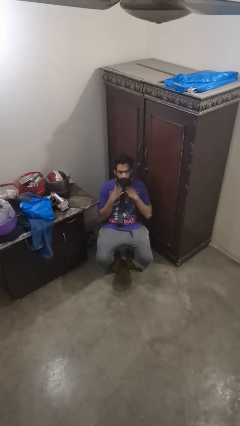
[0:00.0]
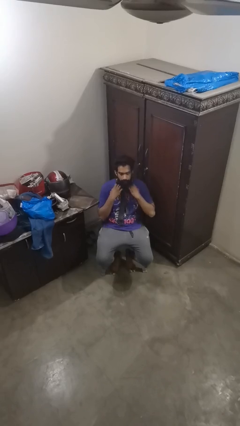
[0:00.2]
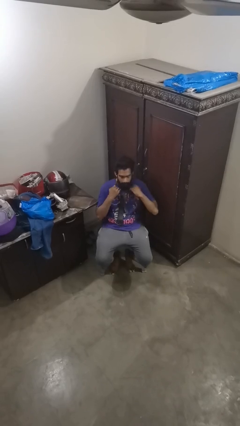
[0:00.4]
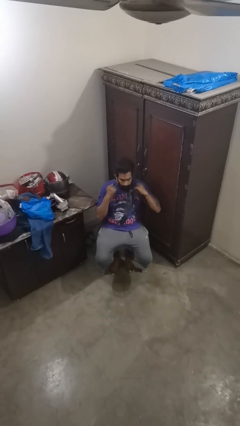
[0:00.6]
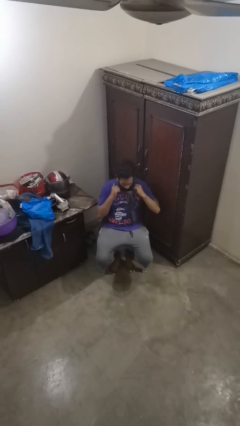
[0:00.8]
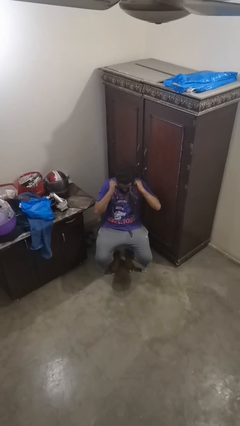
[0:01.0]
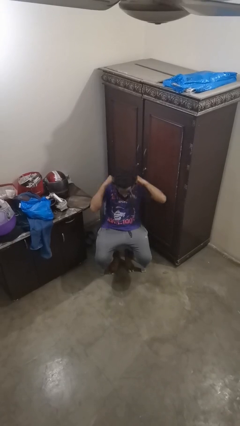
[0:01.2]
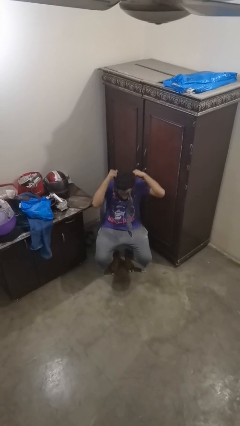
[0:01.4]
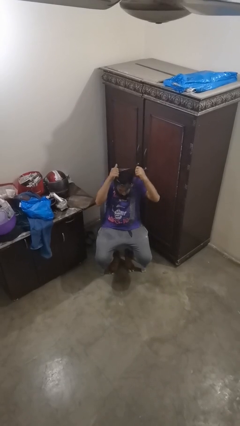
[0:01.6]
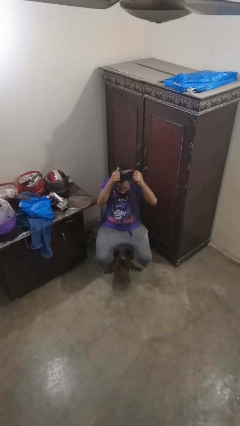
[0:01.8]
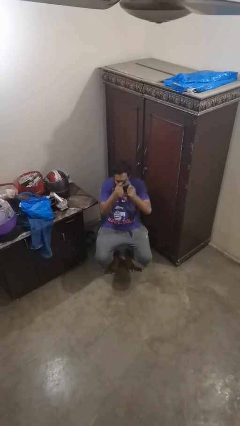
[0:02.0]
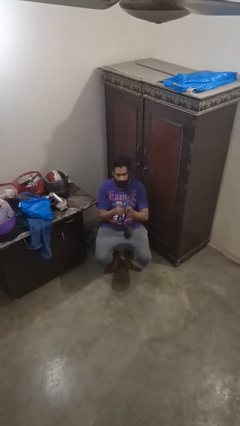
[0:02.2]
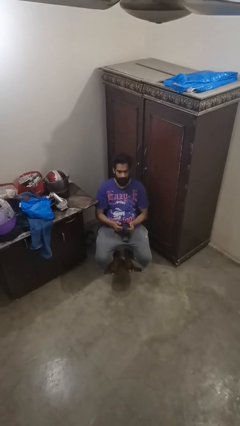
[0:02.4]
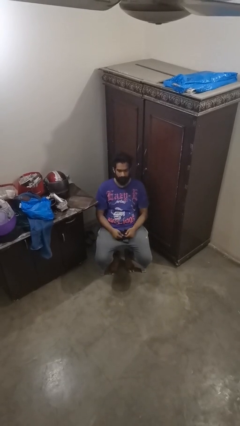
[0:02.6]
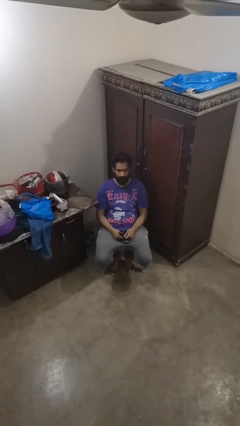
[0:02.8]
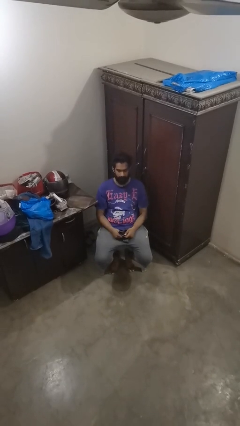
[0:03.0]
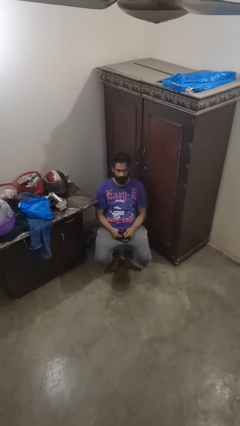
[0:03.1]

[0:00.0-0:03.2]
person takes off necktie

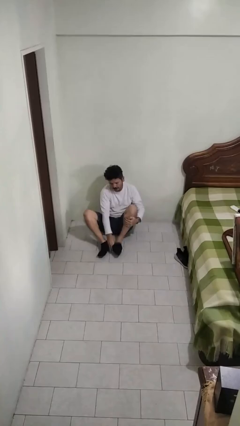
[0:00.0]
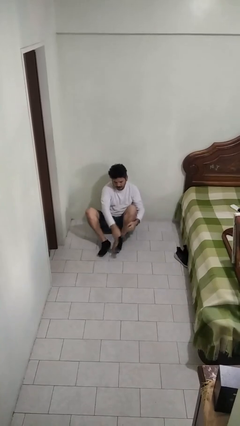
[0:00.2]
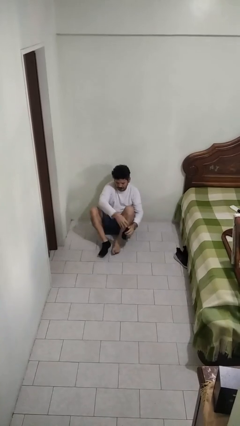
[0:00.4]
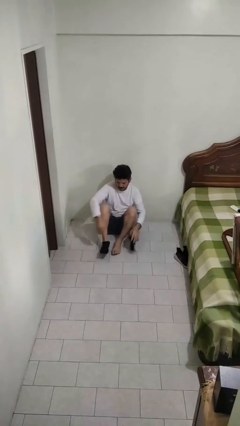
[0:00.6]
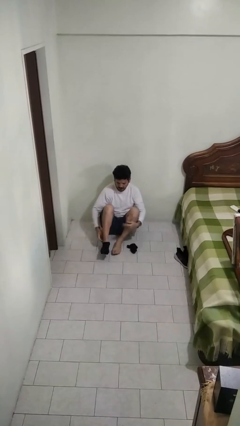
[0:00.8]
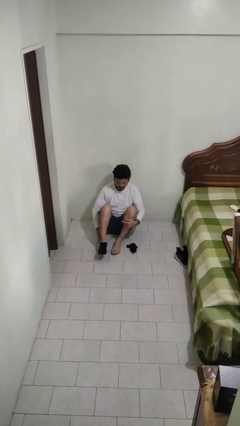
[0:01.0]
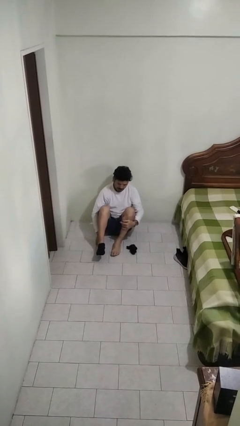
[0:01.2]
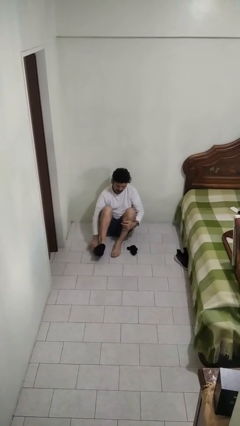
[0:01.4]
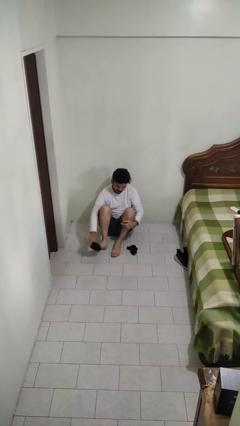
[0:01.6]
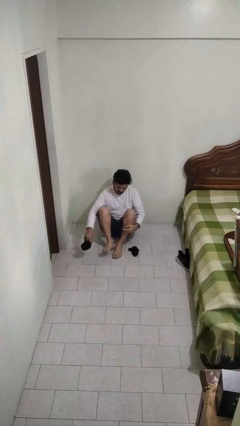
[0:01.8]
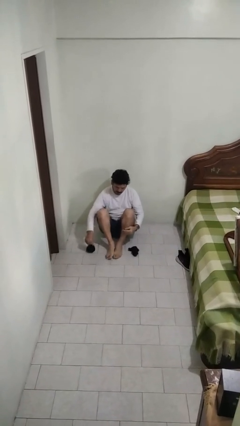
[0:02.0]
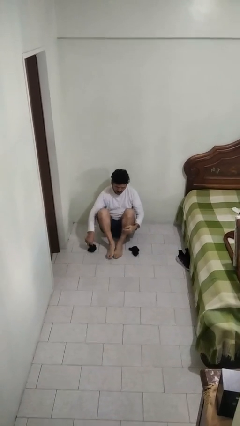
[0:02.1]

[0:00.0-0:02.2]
person takes off socks

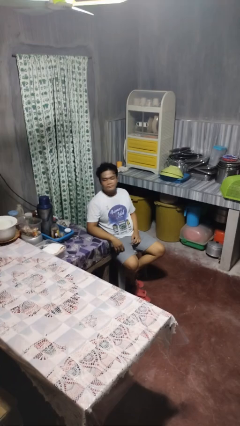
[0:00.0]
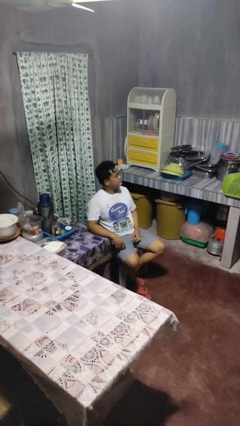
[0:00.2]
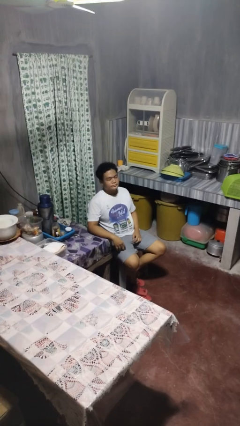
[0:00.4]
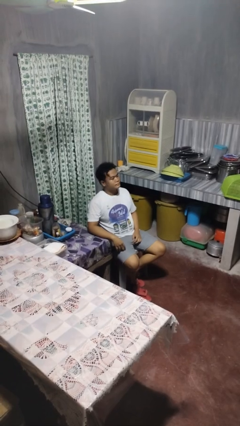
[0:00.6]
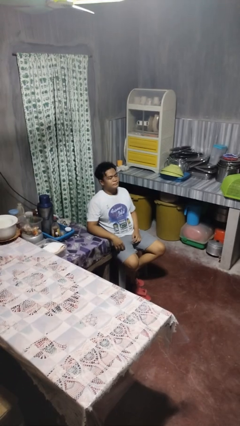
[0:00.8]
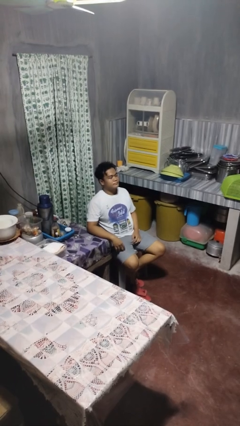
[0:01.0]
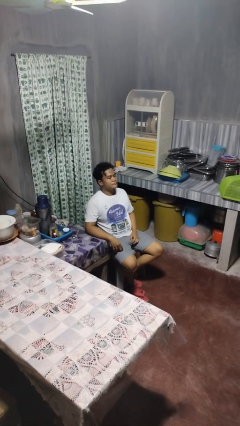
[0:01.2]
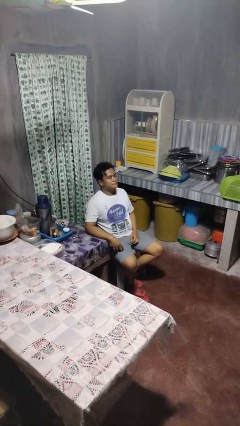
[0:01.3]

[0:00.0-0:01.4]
person shakes head

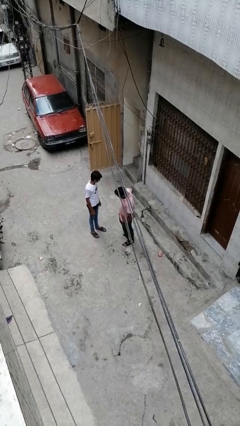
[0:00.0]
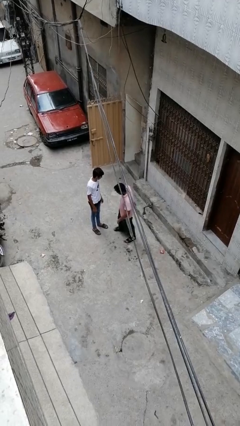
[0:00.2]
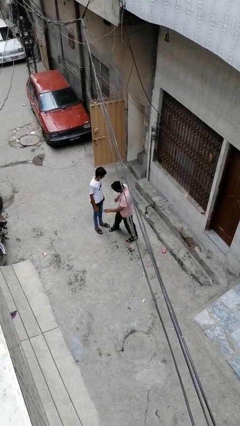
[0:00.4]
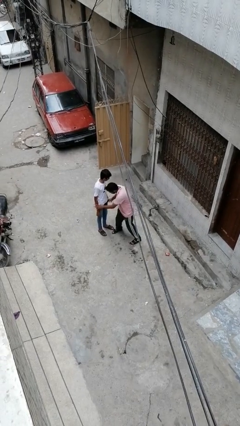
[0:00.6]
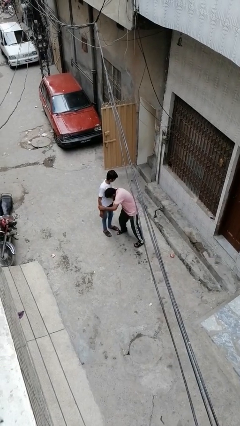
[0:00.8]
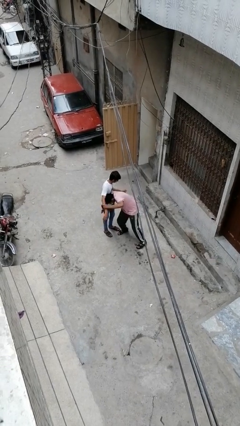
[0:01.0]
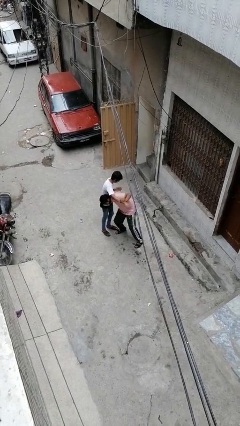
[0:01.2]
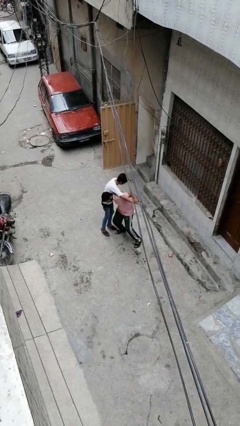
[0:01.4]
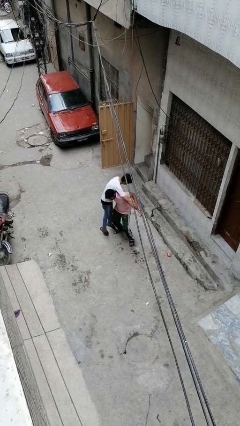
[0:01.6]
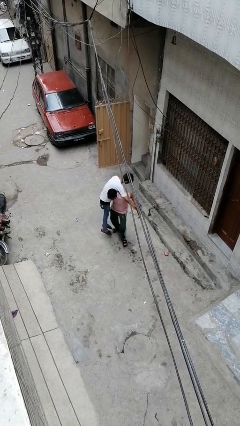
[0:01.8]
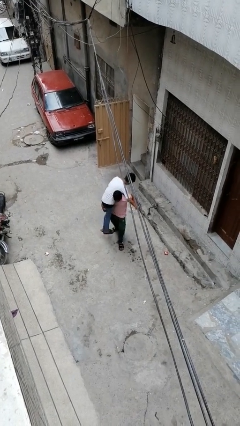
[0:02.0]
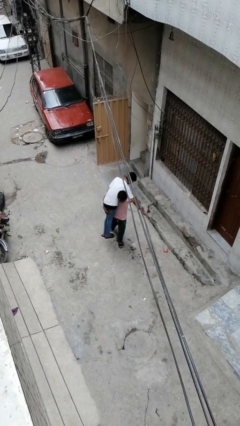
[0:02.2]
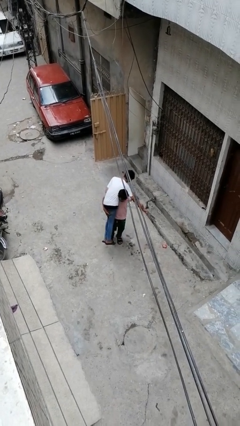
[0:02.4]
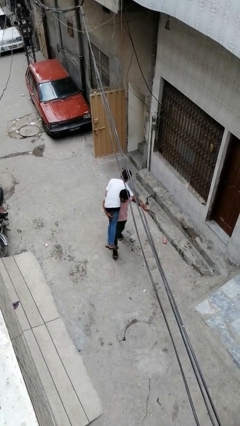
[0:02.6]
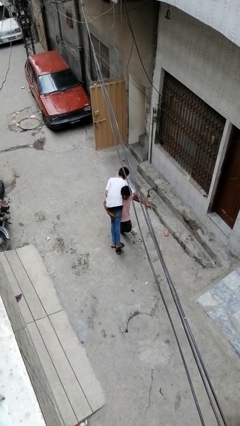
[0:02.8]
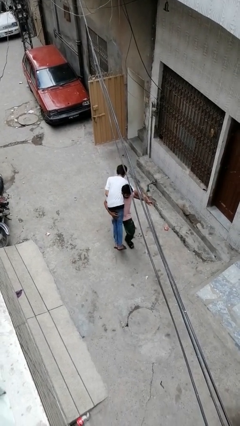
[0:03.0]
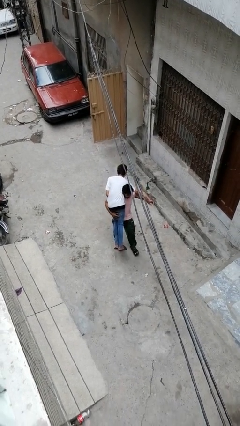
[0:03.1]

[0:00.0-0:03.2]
person carries person over shoulder

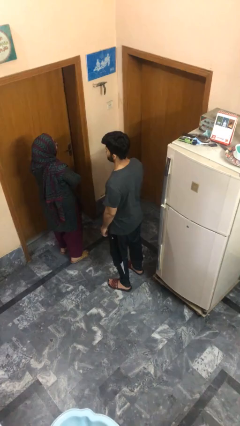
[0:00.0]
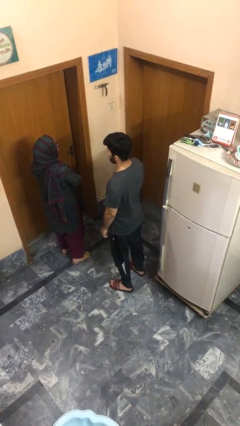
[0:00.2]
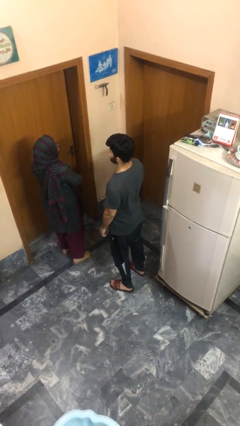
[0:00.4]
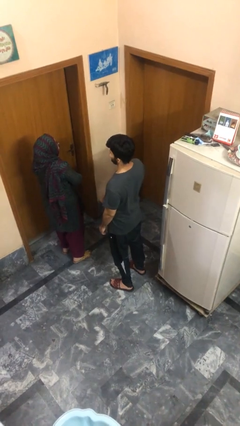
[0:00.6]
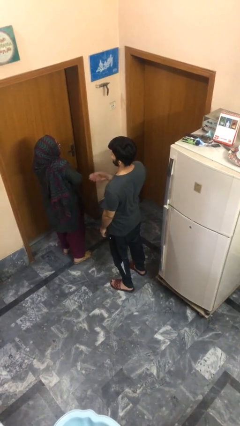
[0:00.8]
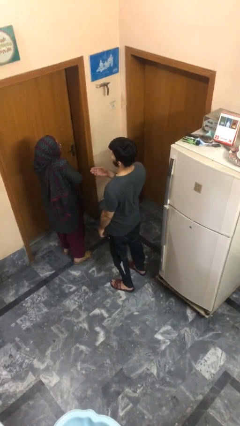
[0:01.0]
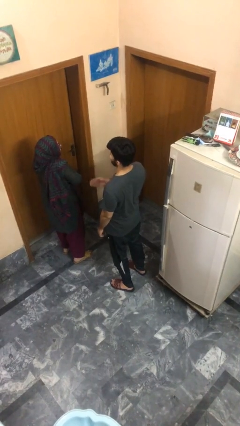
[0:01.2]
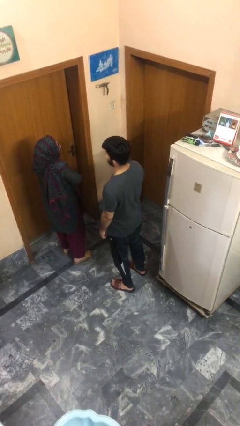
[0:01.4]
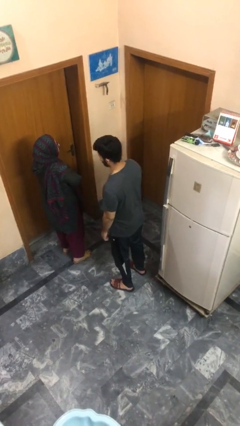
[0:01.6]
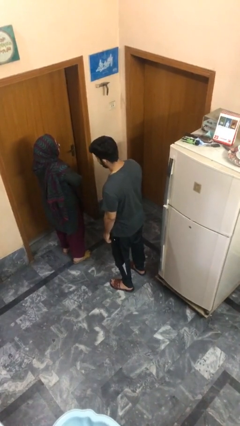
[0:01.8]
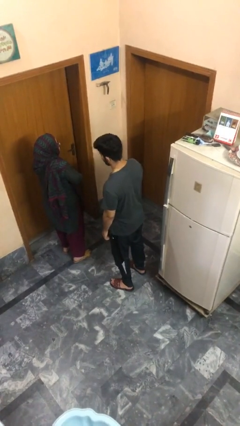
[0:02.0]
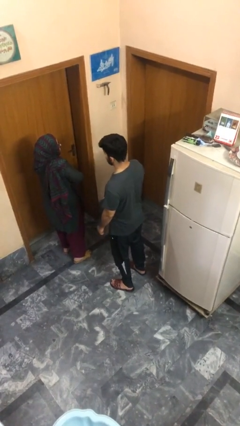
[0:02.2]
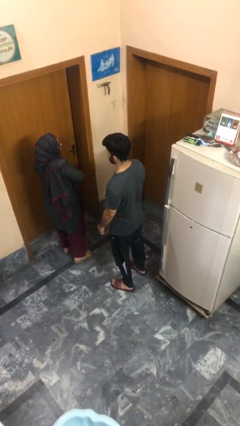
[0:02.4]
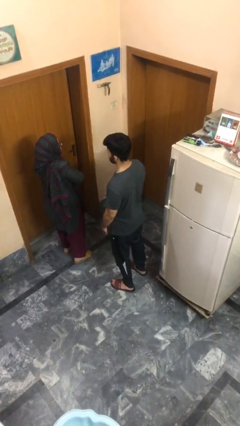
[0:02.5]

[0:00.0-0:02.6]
person laughs with person

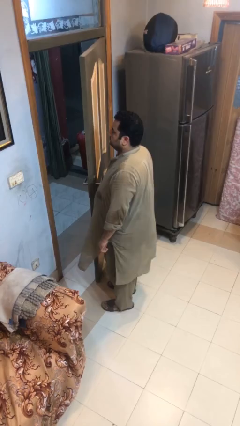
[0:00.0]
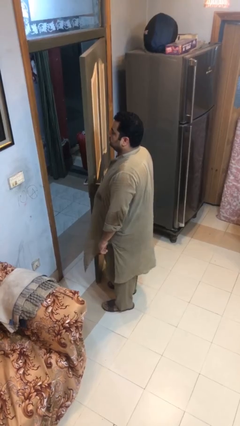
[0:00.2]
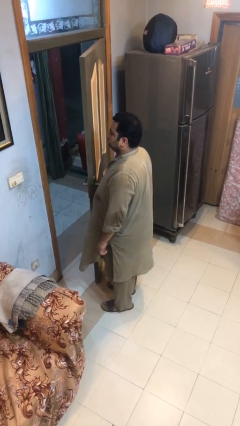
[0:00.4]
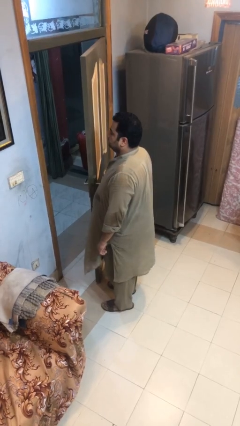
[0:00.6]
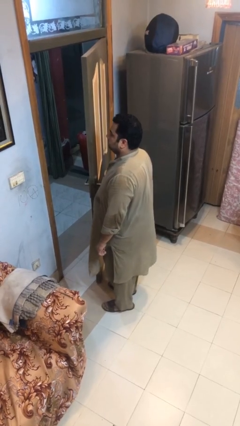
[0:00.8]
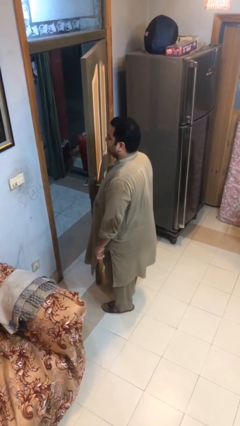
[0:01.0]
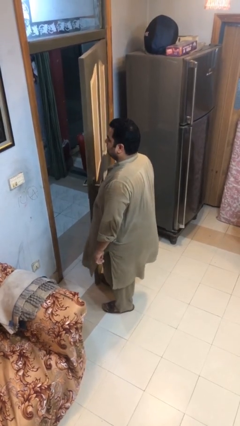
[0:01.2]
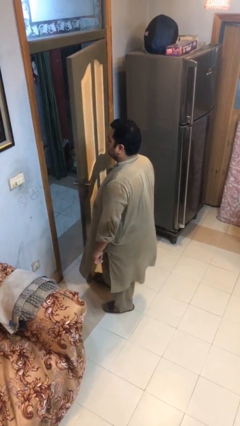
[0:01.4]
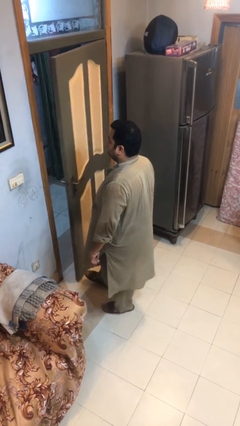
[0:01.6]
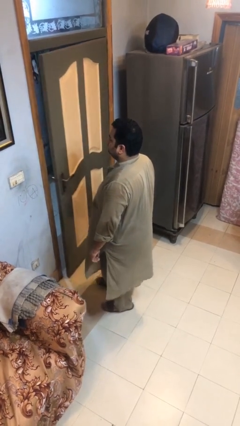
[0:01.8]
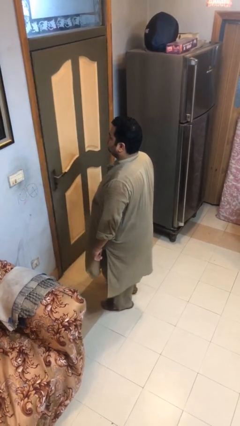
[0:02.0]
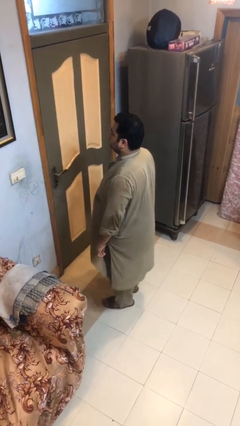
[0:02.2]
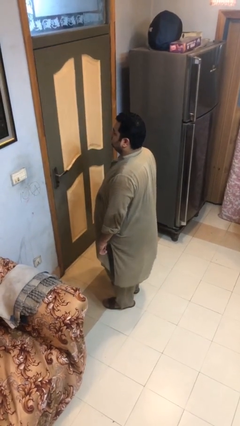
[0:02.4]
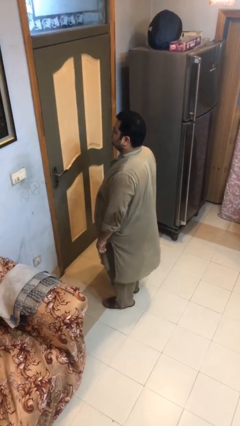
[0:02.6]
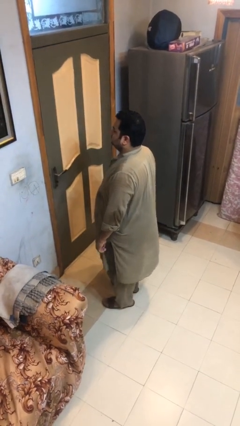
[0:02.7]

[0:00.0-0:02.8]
person closes door with foot

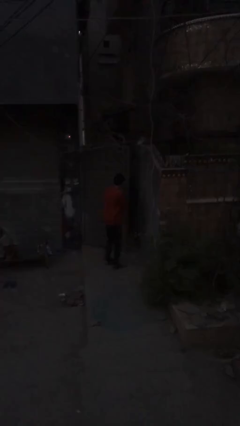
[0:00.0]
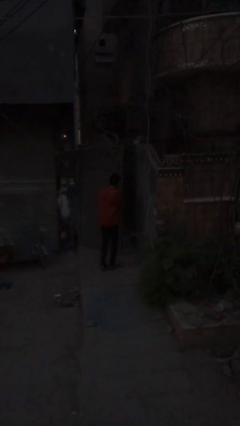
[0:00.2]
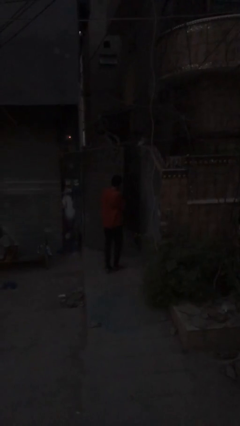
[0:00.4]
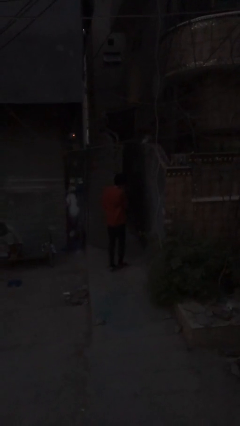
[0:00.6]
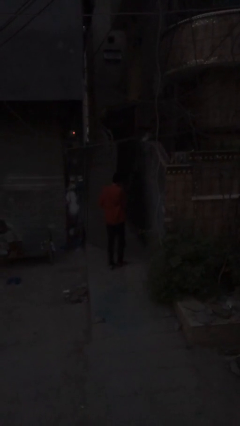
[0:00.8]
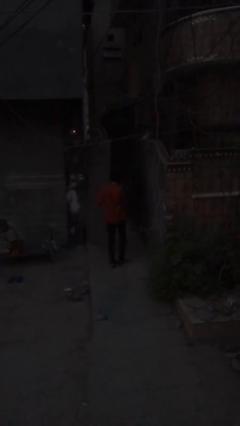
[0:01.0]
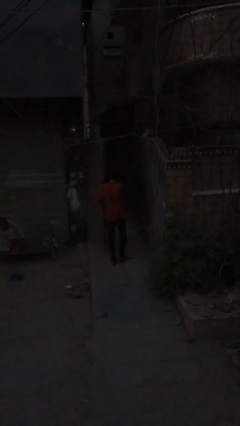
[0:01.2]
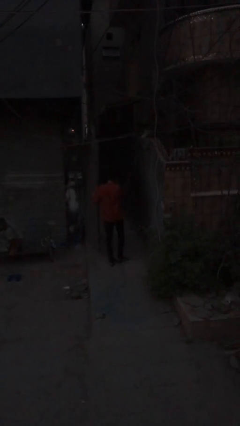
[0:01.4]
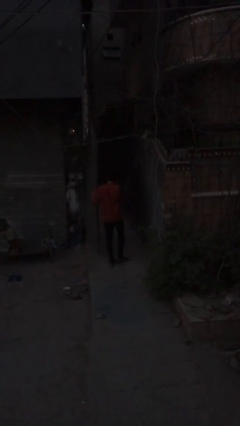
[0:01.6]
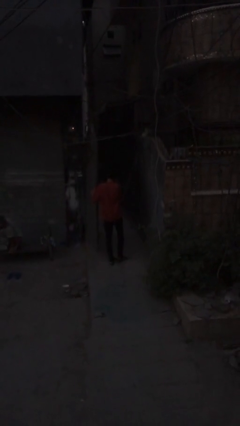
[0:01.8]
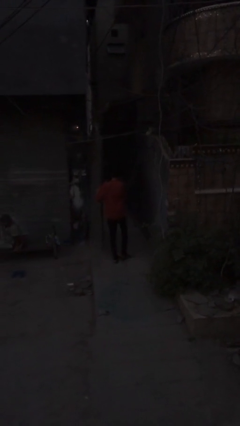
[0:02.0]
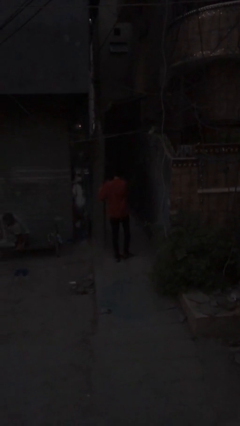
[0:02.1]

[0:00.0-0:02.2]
person opens facility door
